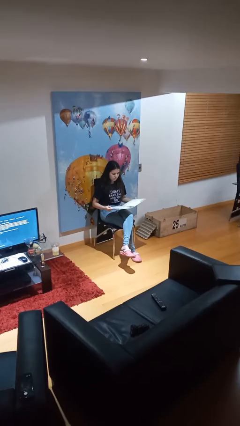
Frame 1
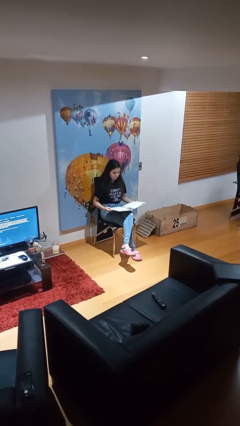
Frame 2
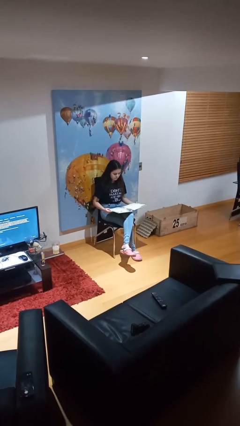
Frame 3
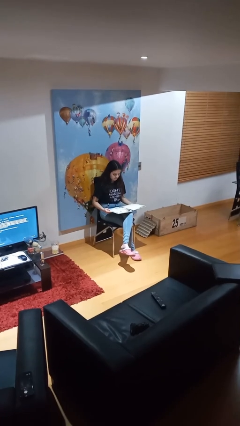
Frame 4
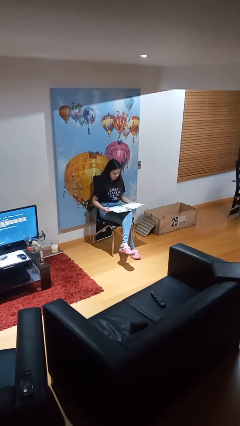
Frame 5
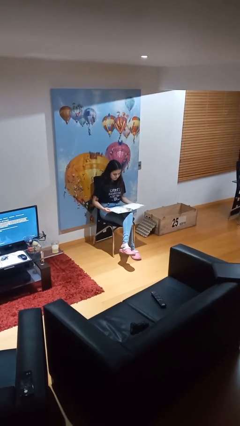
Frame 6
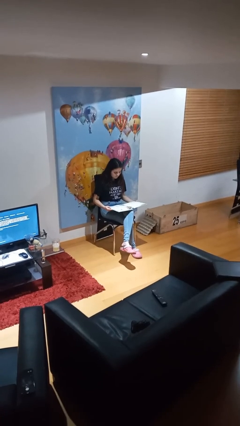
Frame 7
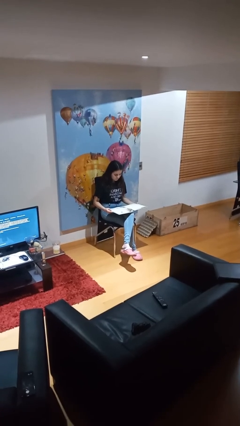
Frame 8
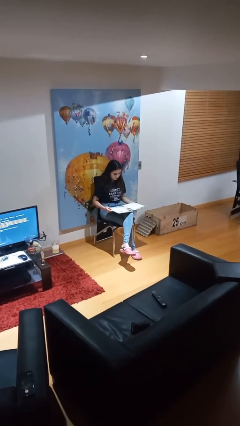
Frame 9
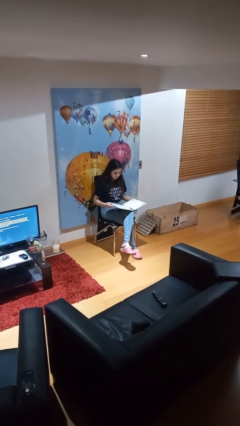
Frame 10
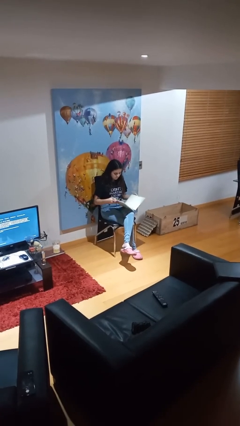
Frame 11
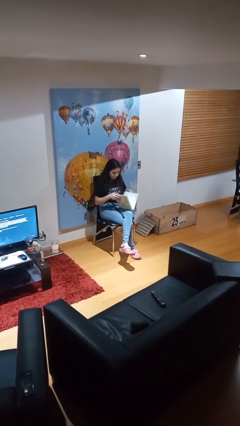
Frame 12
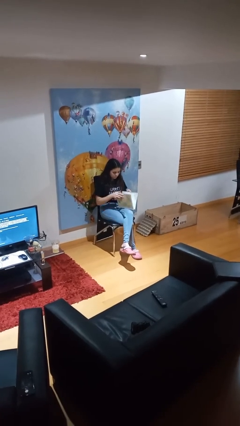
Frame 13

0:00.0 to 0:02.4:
person reads document

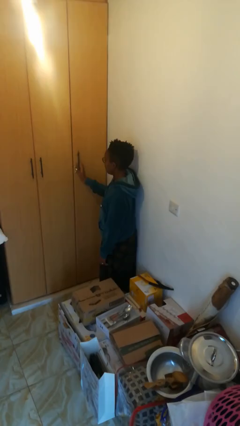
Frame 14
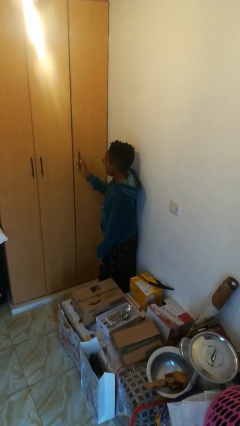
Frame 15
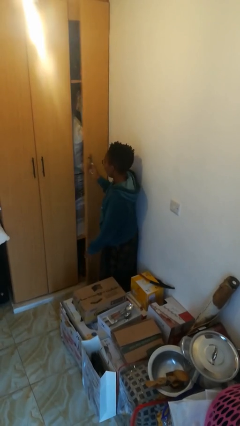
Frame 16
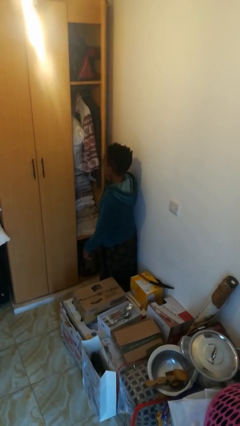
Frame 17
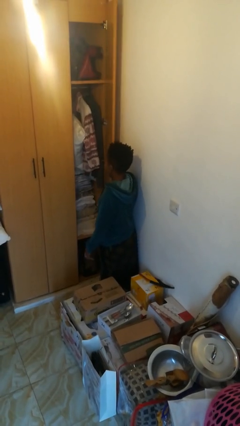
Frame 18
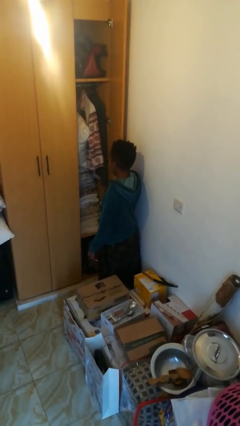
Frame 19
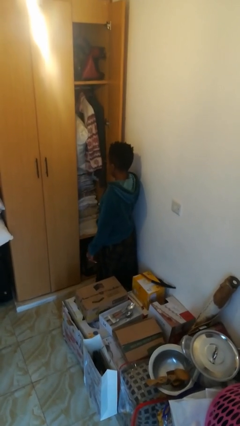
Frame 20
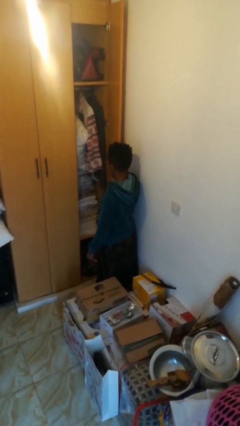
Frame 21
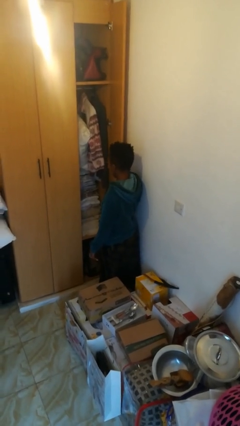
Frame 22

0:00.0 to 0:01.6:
person opens closet door

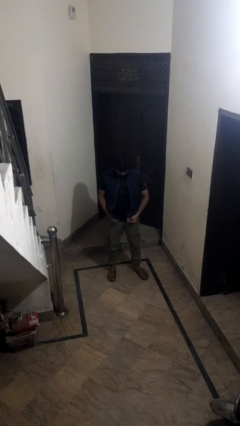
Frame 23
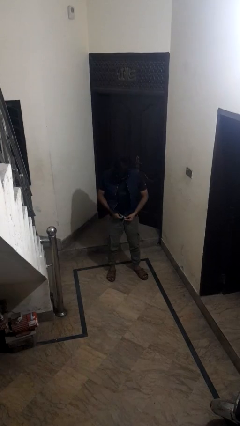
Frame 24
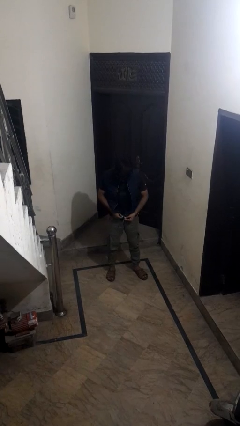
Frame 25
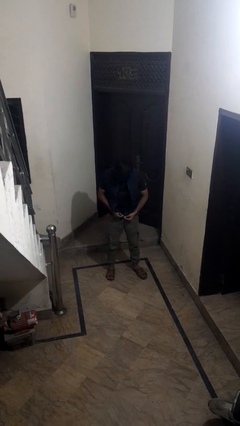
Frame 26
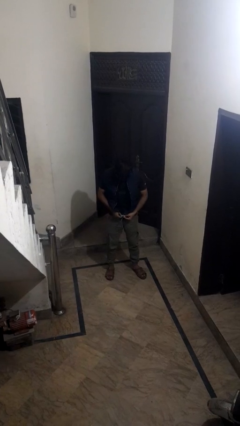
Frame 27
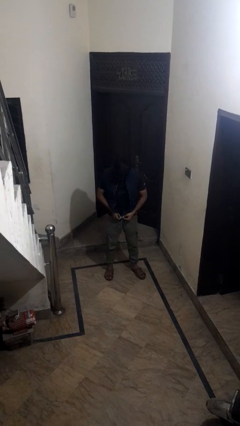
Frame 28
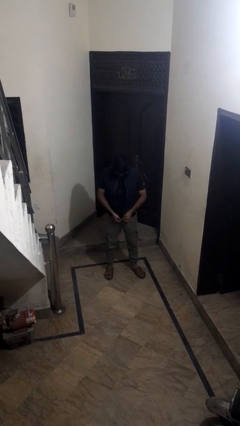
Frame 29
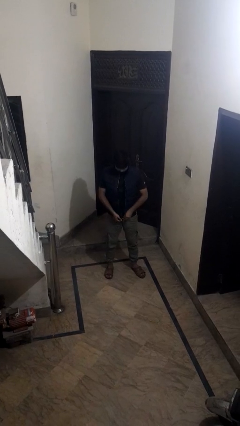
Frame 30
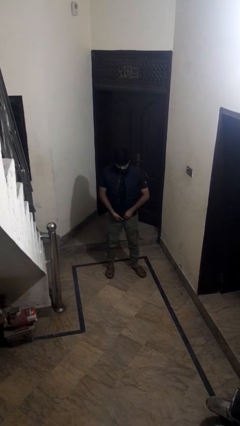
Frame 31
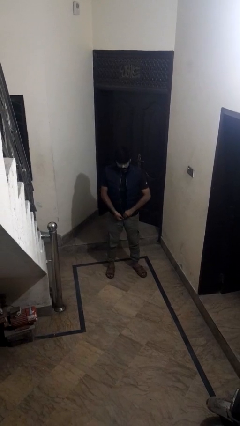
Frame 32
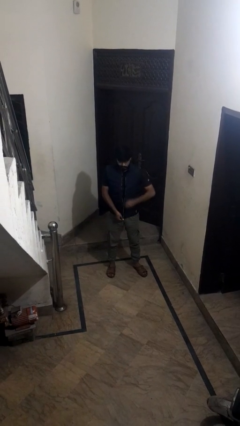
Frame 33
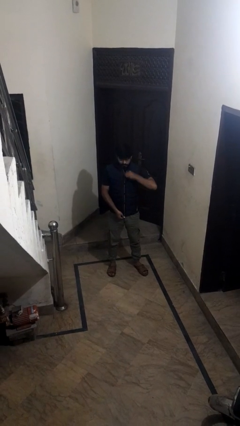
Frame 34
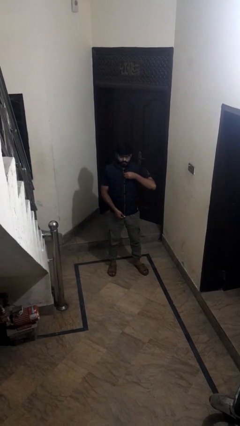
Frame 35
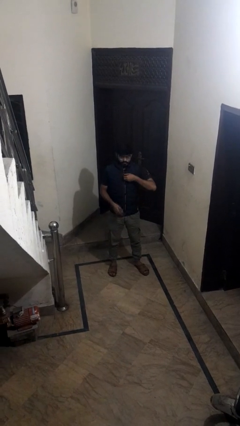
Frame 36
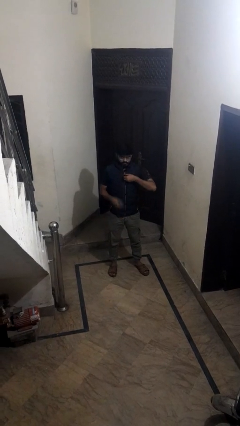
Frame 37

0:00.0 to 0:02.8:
person zips up jacket

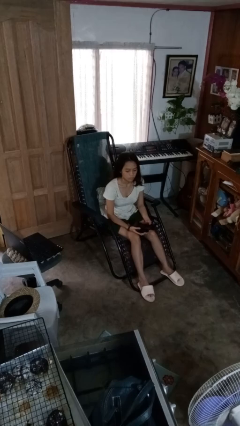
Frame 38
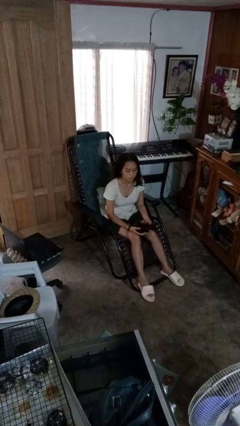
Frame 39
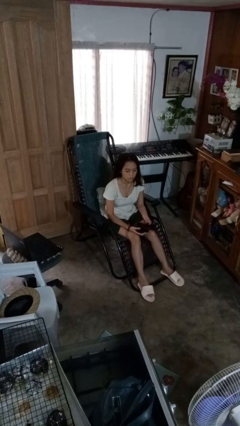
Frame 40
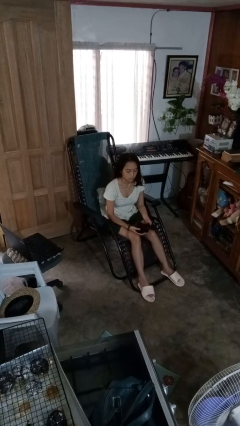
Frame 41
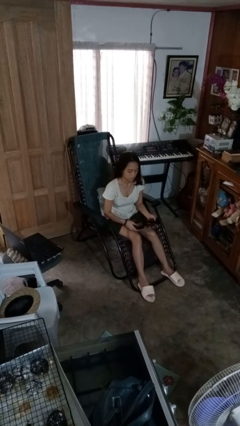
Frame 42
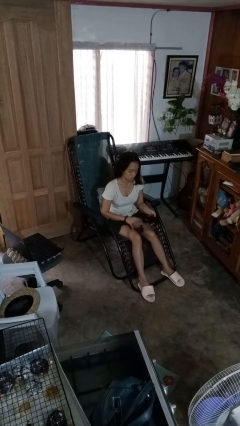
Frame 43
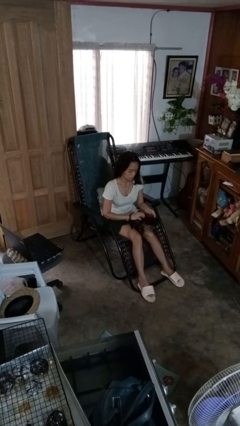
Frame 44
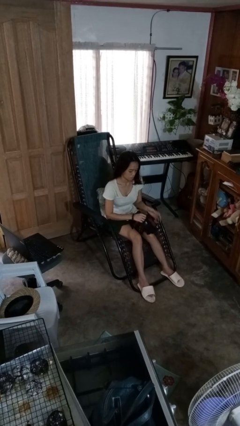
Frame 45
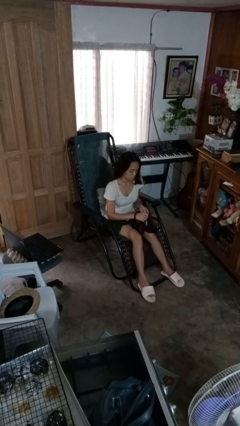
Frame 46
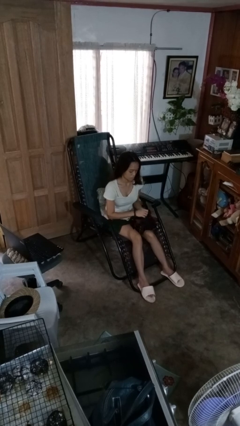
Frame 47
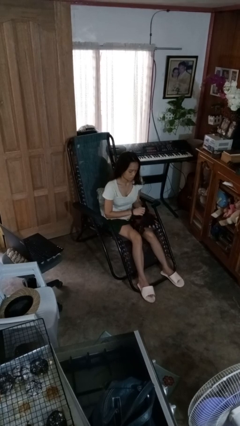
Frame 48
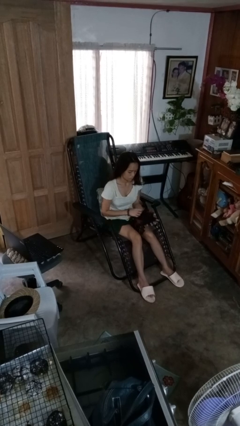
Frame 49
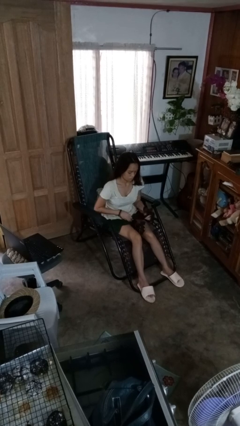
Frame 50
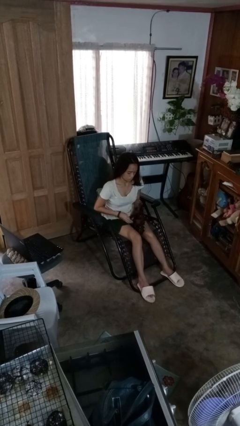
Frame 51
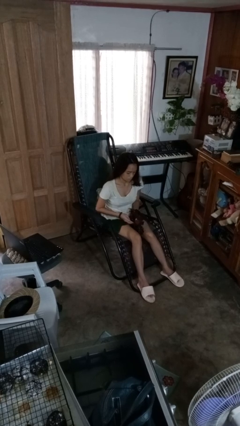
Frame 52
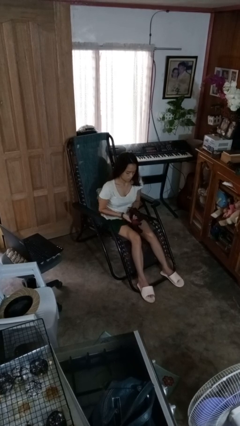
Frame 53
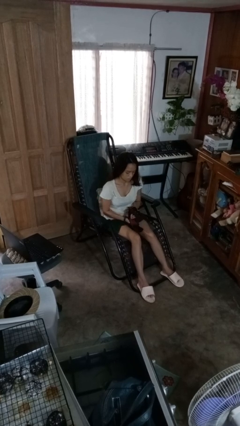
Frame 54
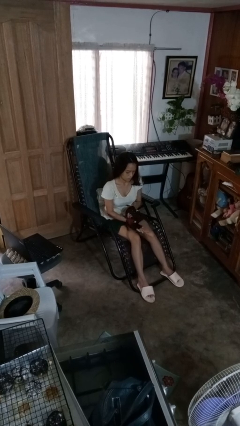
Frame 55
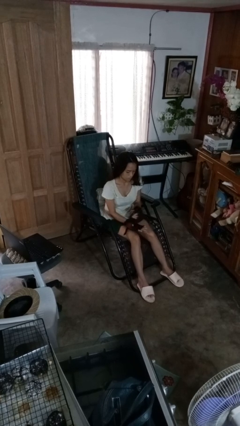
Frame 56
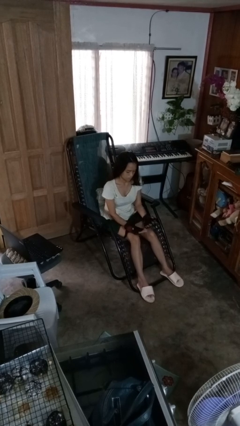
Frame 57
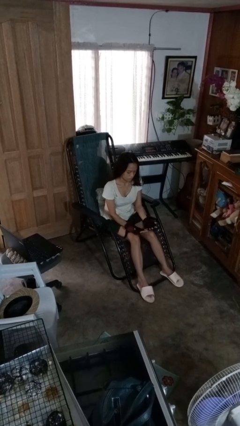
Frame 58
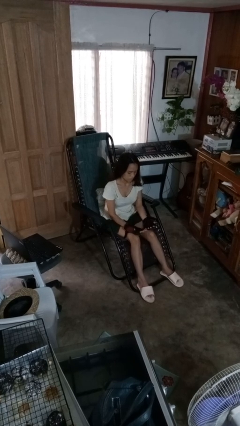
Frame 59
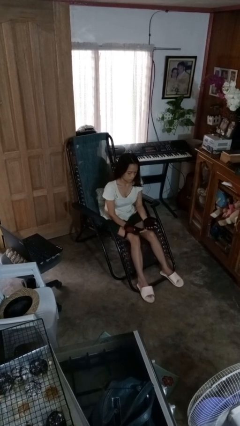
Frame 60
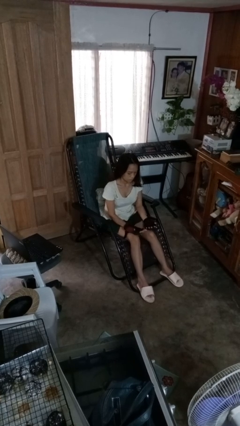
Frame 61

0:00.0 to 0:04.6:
person puts on gloves

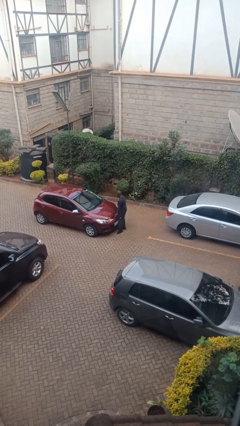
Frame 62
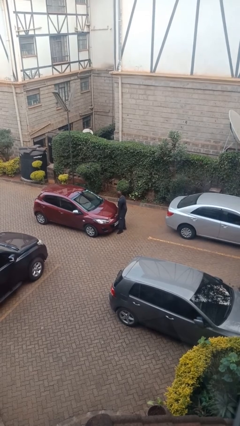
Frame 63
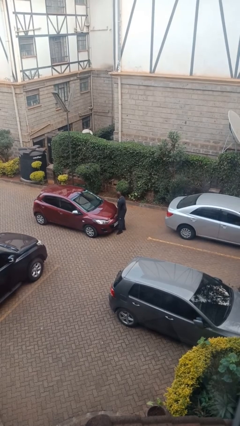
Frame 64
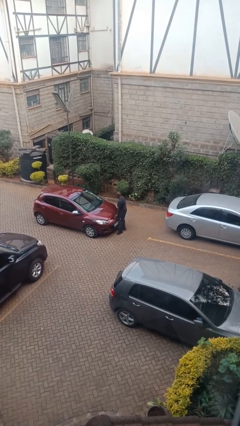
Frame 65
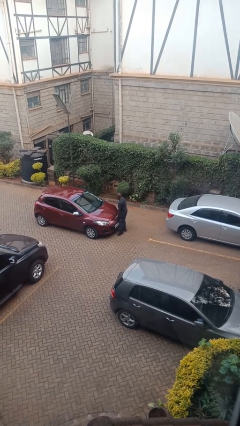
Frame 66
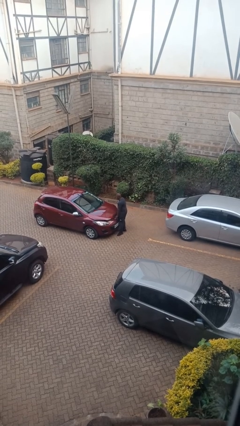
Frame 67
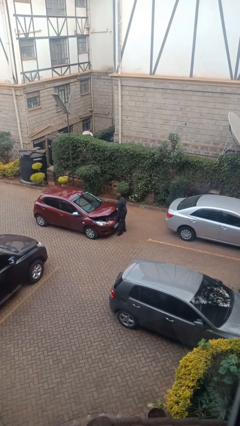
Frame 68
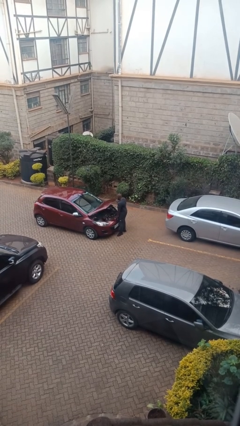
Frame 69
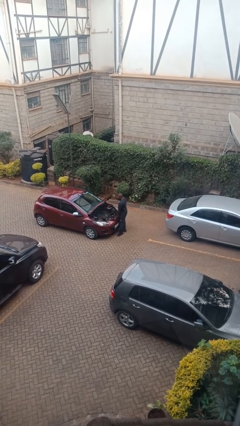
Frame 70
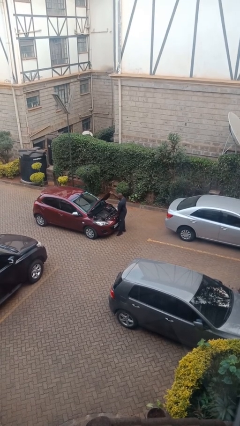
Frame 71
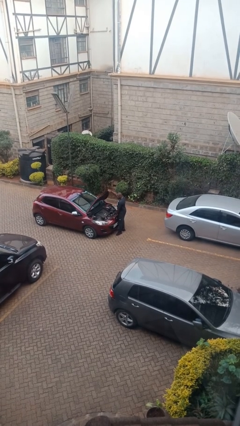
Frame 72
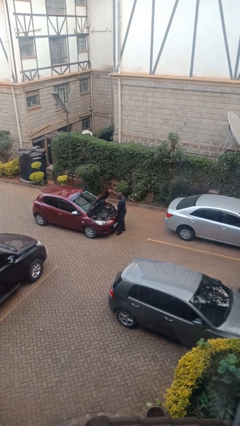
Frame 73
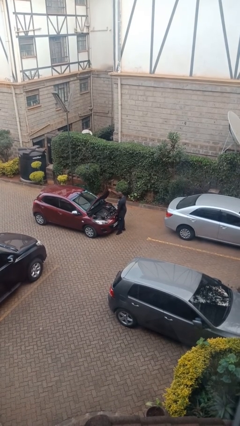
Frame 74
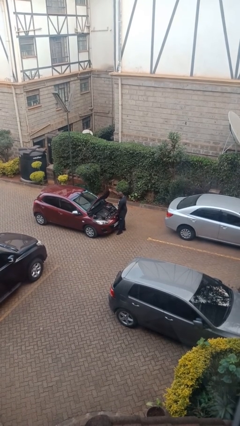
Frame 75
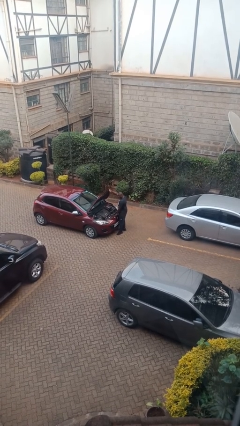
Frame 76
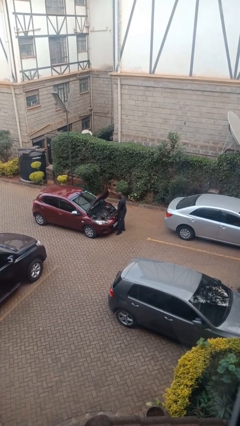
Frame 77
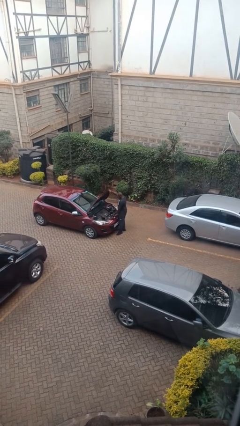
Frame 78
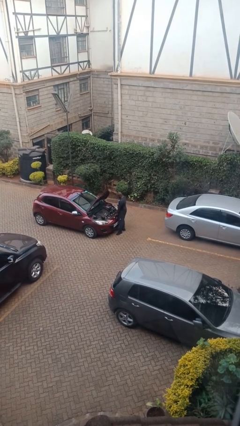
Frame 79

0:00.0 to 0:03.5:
person opens car hood

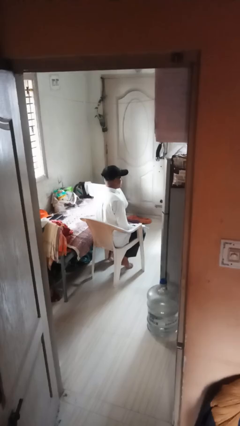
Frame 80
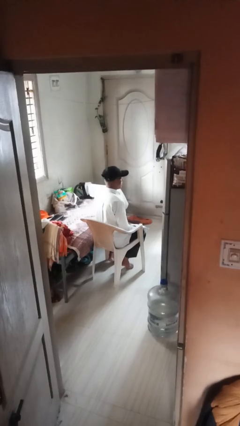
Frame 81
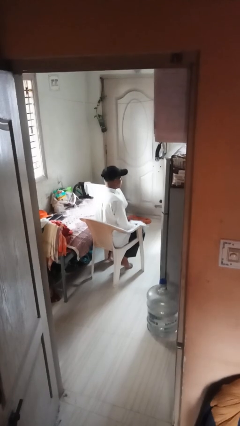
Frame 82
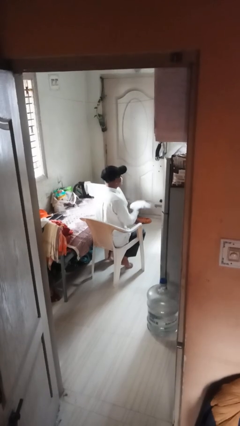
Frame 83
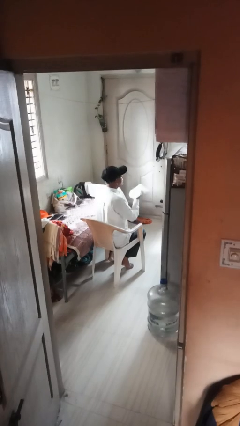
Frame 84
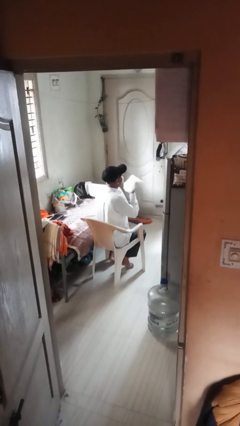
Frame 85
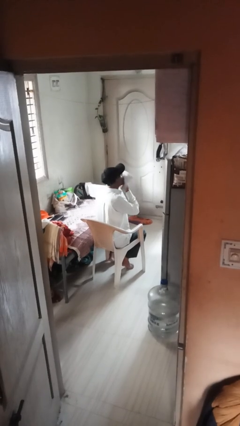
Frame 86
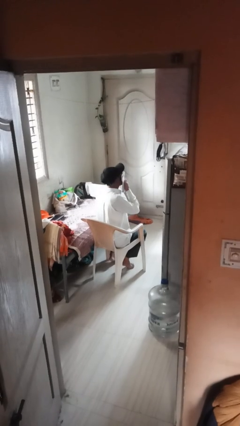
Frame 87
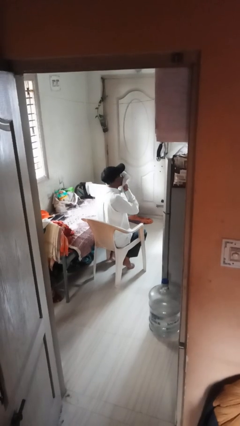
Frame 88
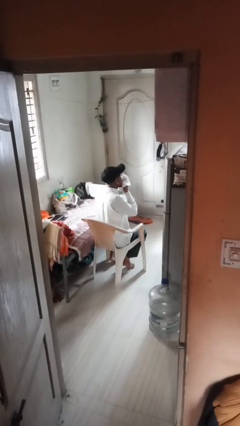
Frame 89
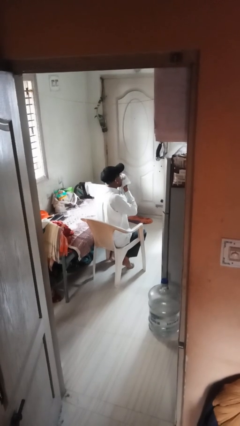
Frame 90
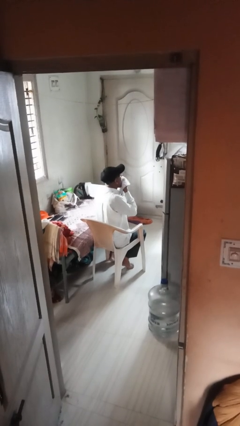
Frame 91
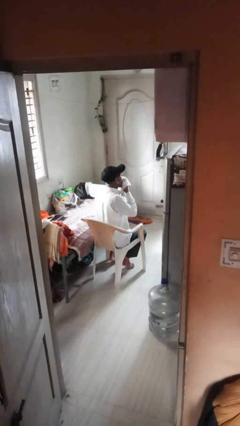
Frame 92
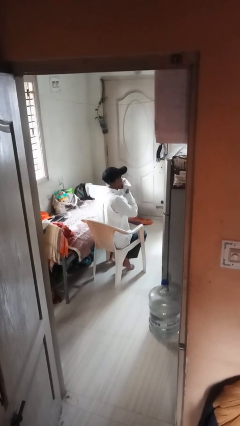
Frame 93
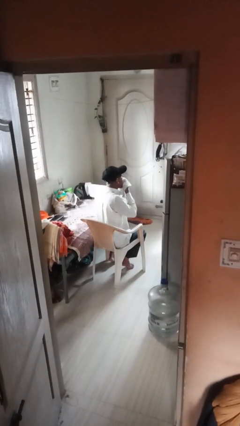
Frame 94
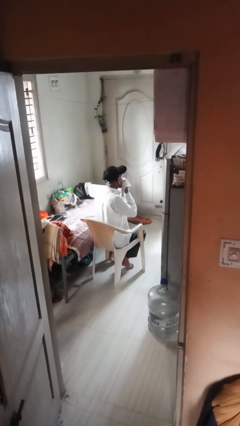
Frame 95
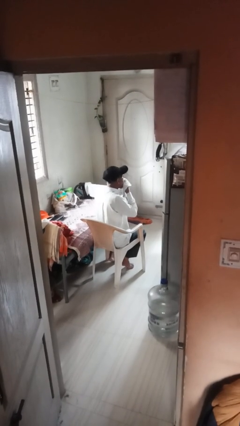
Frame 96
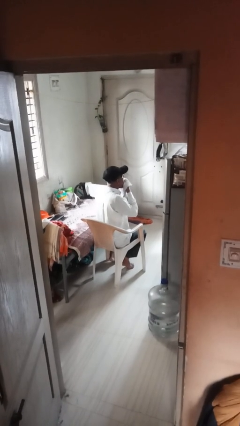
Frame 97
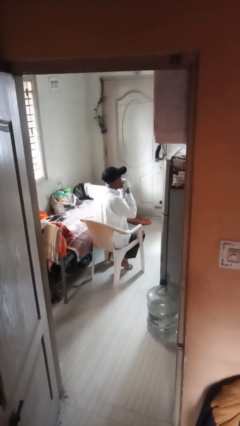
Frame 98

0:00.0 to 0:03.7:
person wipes mouth with napkin
